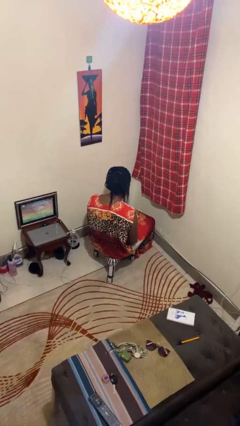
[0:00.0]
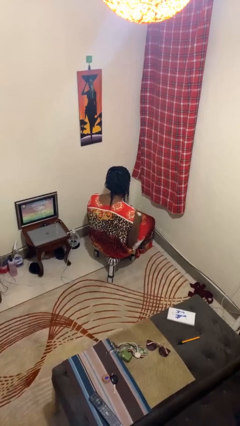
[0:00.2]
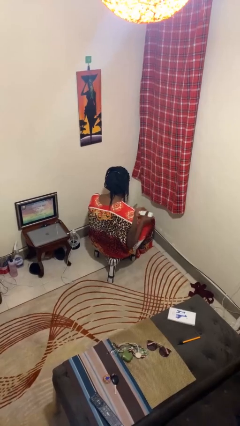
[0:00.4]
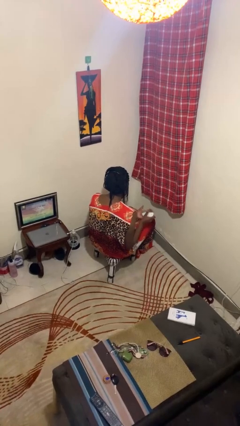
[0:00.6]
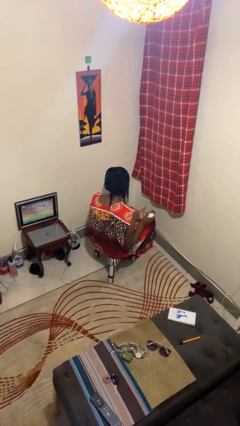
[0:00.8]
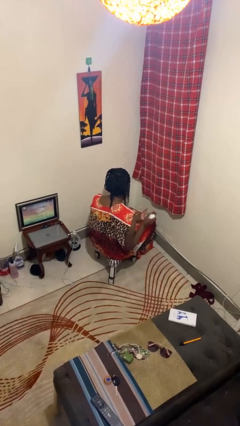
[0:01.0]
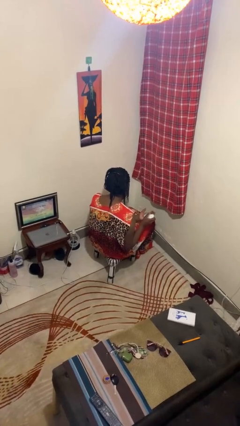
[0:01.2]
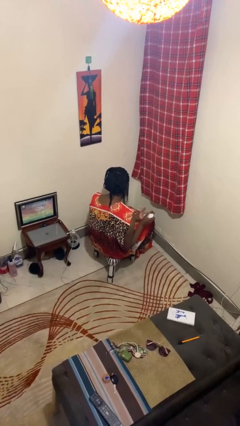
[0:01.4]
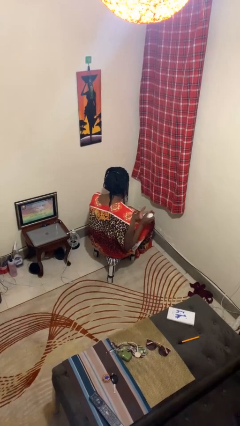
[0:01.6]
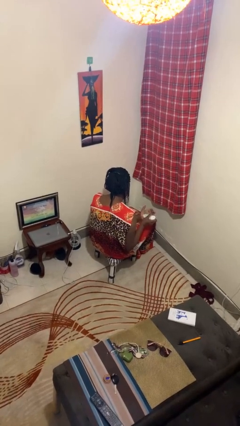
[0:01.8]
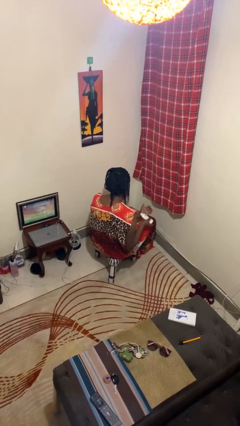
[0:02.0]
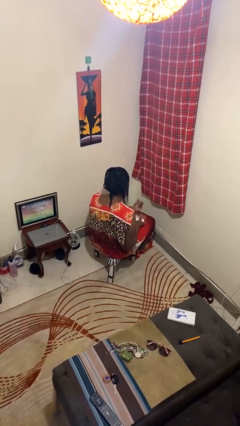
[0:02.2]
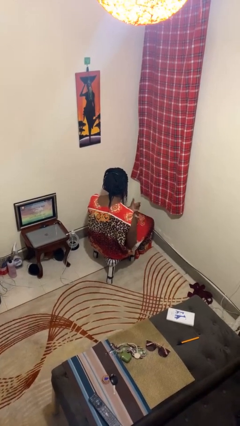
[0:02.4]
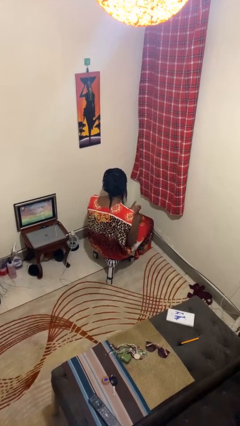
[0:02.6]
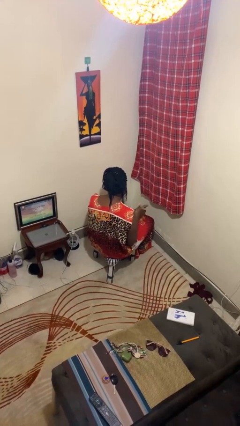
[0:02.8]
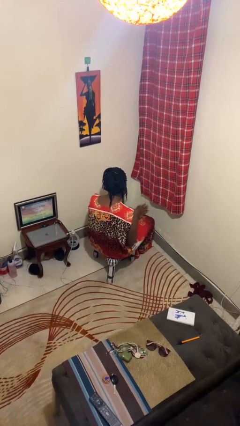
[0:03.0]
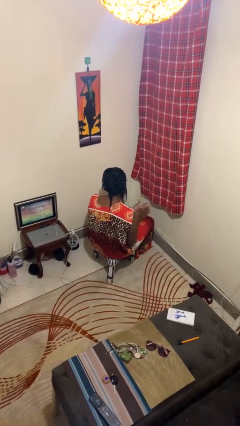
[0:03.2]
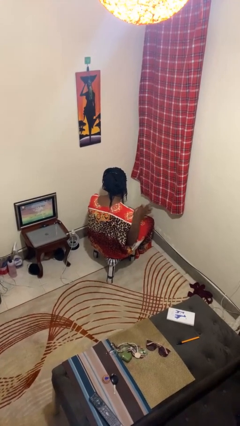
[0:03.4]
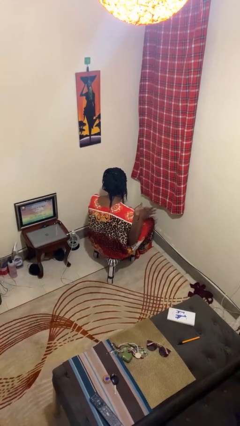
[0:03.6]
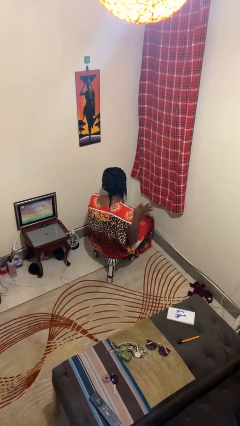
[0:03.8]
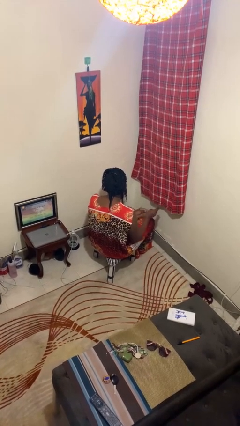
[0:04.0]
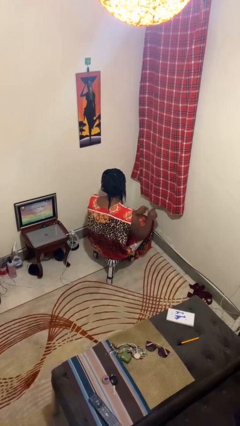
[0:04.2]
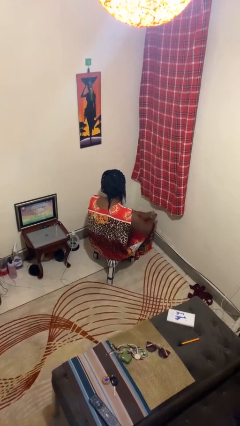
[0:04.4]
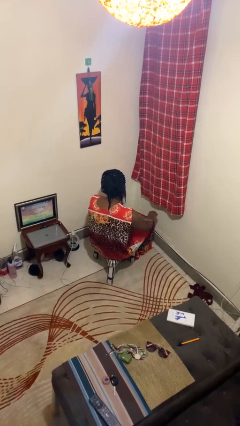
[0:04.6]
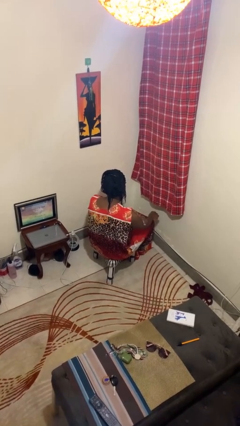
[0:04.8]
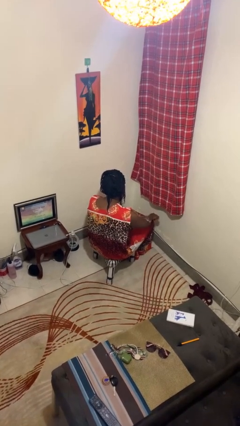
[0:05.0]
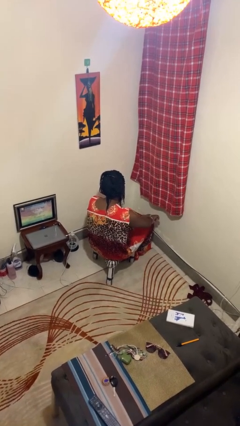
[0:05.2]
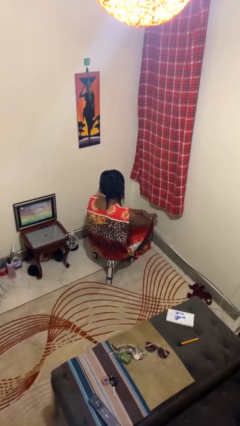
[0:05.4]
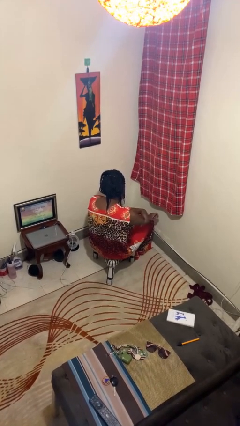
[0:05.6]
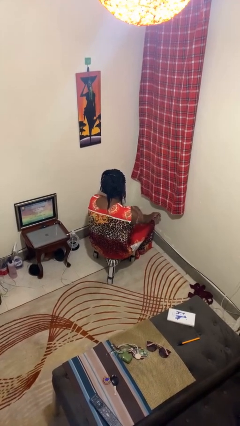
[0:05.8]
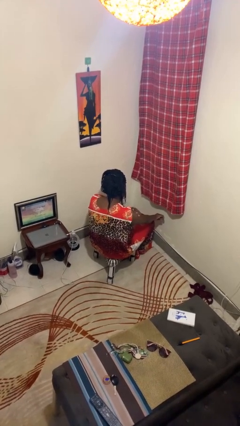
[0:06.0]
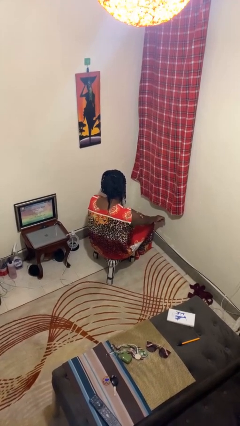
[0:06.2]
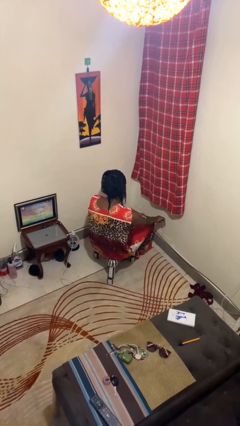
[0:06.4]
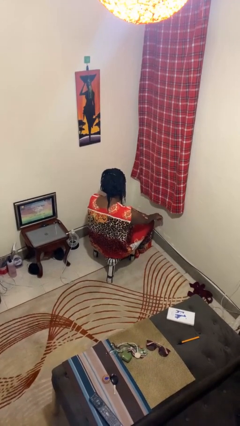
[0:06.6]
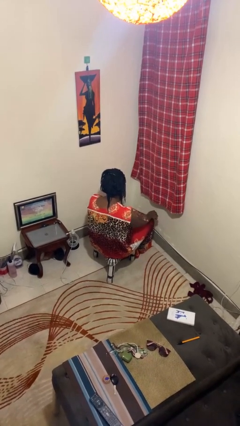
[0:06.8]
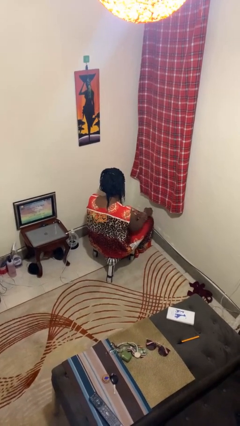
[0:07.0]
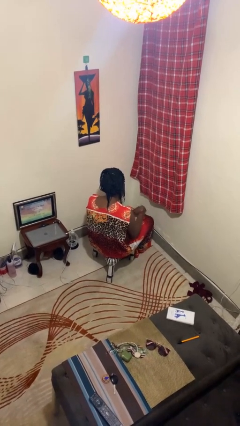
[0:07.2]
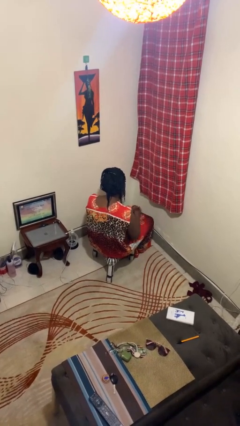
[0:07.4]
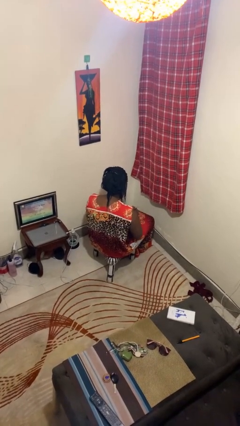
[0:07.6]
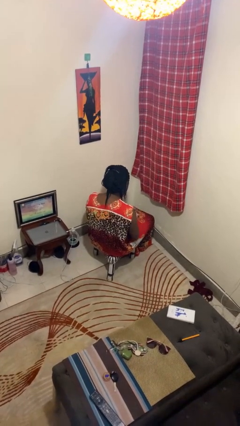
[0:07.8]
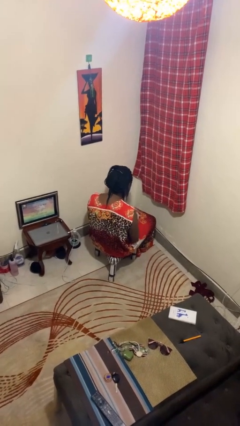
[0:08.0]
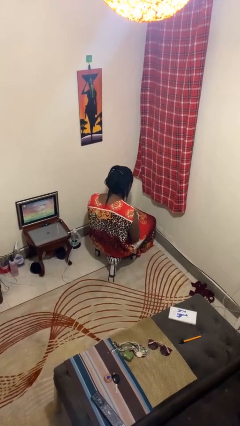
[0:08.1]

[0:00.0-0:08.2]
person applies sunscreen

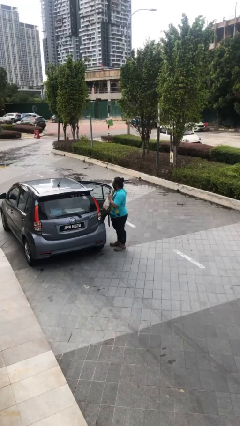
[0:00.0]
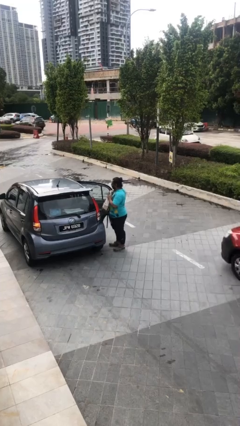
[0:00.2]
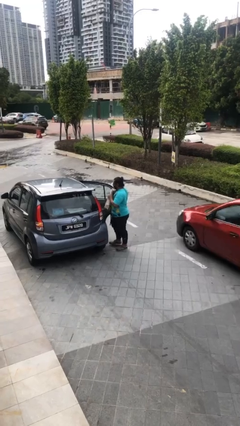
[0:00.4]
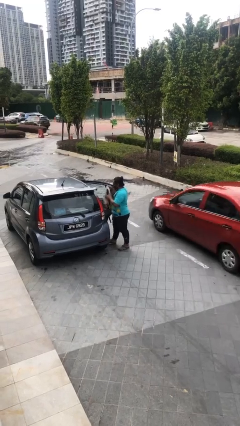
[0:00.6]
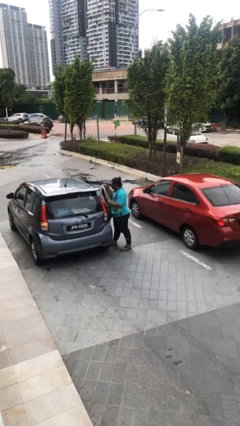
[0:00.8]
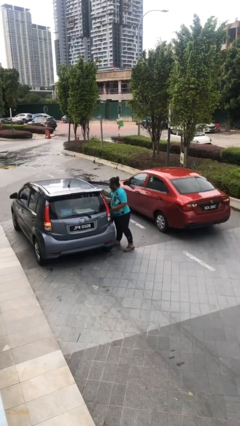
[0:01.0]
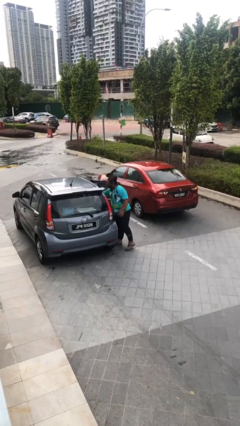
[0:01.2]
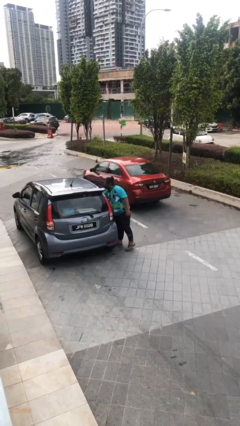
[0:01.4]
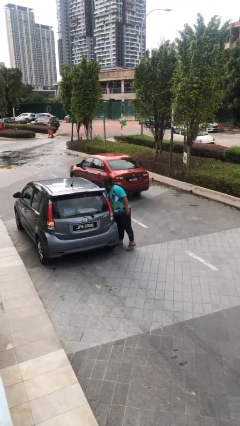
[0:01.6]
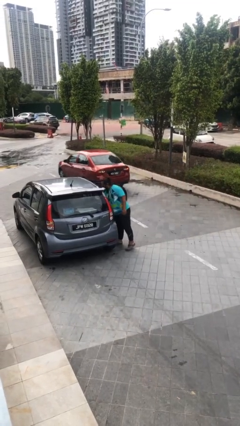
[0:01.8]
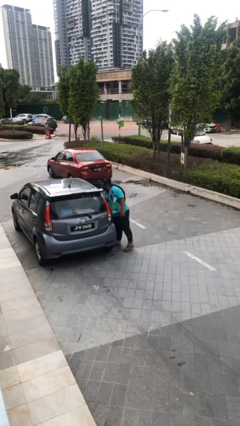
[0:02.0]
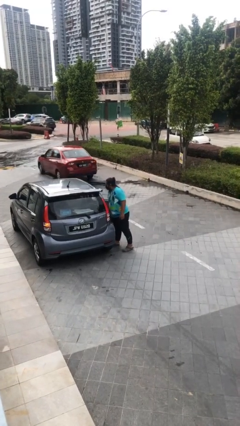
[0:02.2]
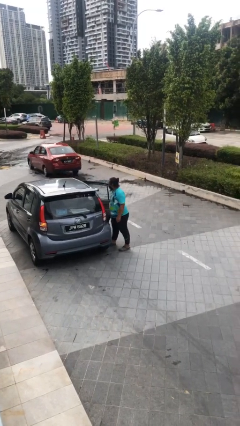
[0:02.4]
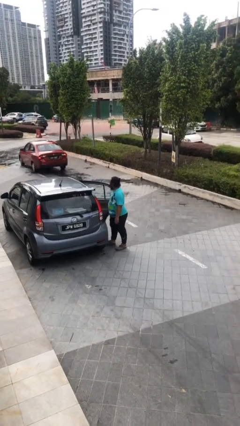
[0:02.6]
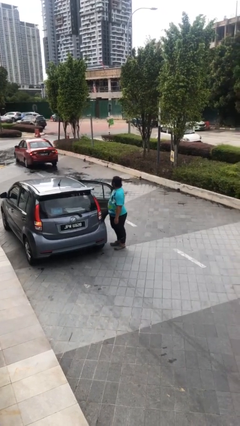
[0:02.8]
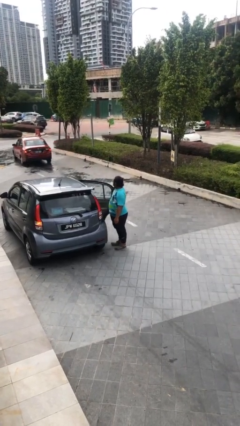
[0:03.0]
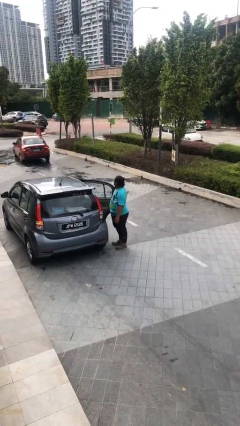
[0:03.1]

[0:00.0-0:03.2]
person loads car

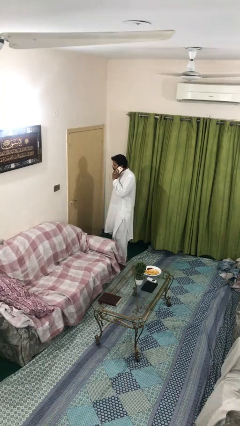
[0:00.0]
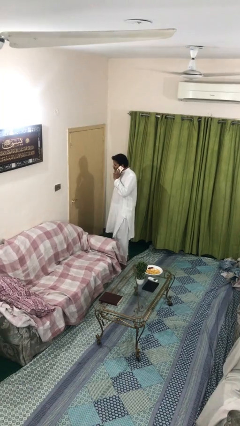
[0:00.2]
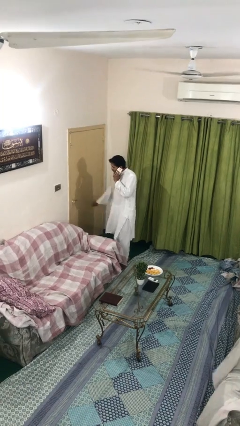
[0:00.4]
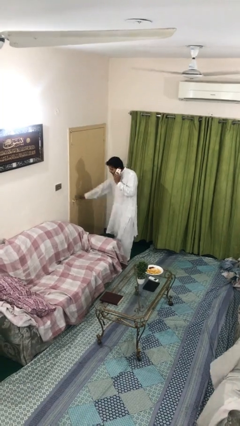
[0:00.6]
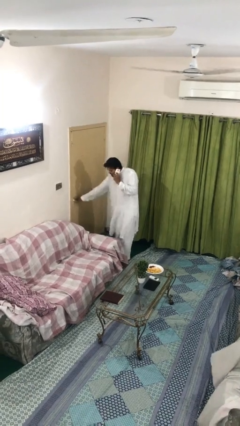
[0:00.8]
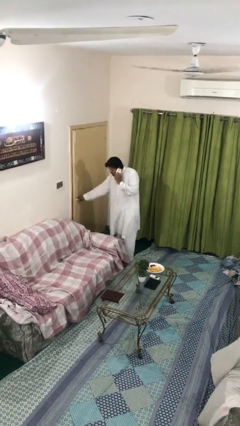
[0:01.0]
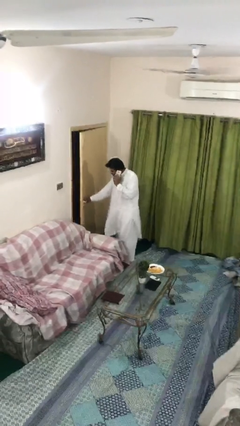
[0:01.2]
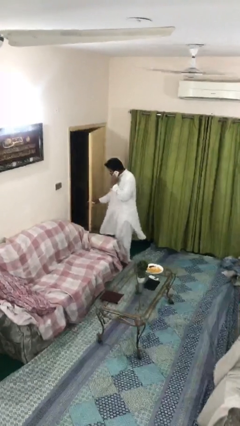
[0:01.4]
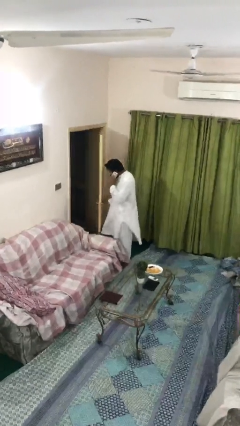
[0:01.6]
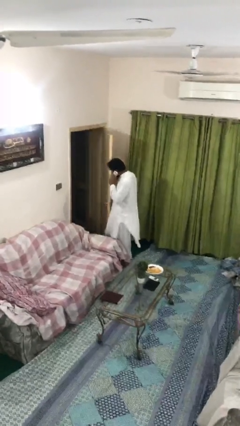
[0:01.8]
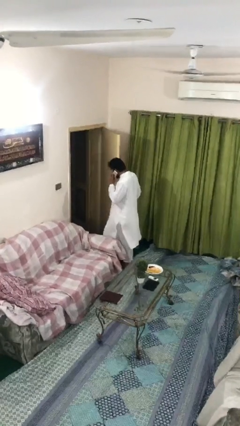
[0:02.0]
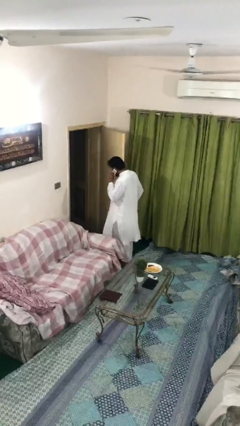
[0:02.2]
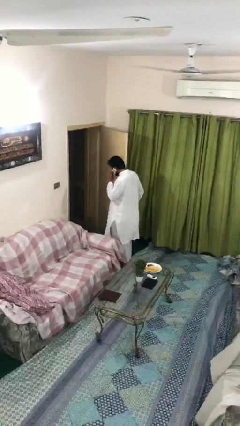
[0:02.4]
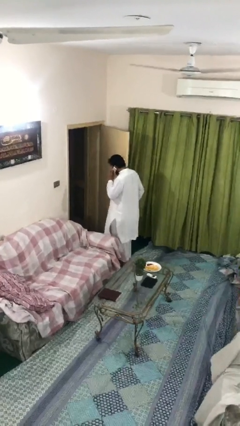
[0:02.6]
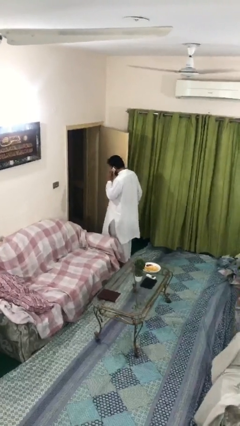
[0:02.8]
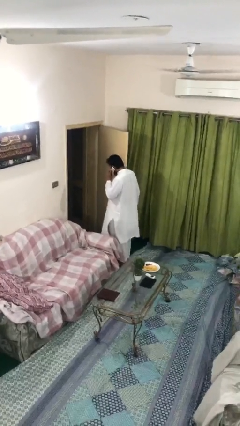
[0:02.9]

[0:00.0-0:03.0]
person opens facility door

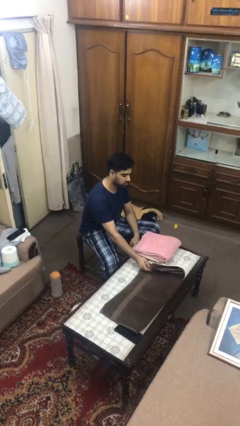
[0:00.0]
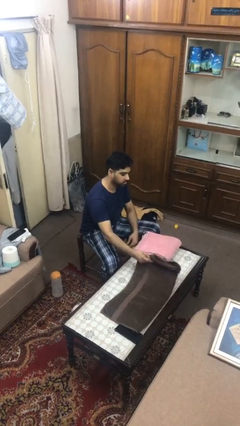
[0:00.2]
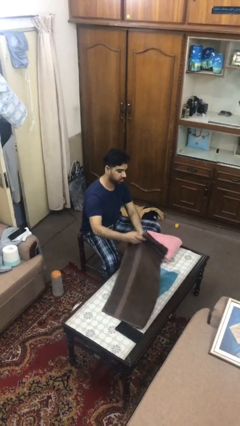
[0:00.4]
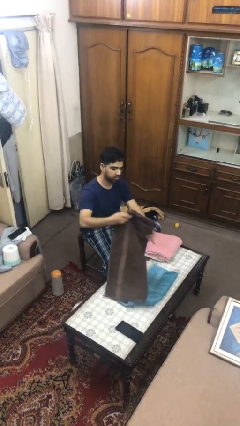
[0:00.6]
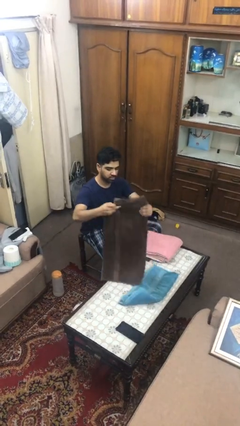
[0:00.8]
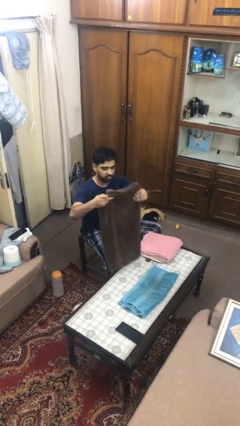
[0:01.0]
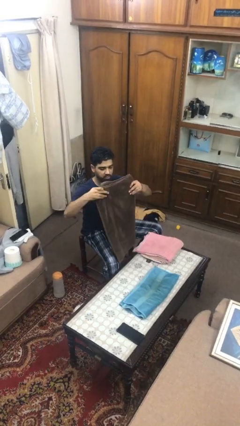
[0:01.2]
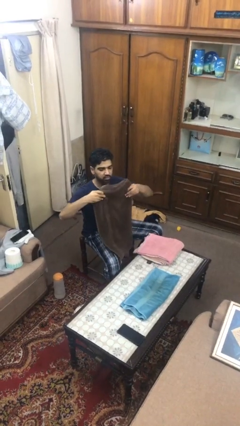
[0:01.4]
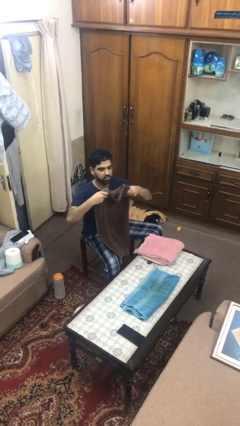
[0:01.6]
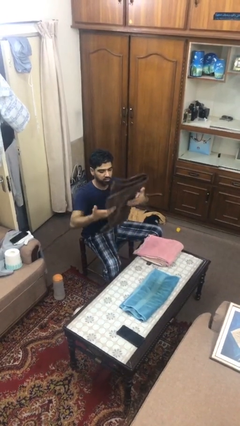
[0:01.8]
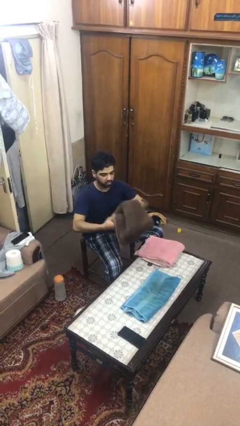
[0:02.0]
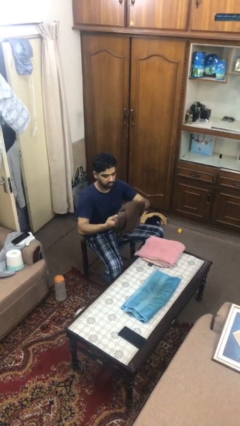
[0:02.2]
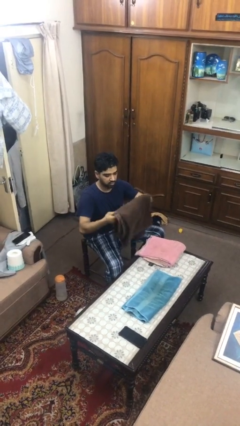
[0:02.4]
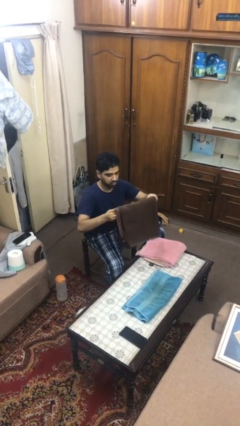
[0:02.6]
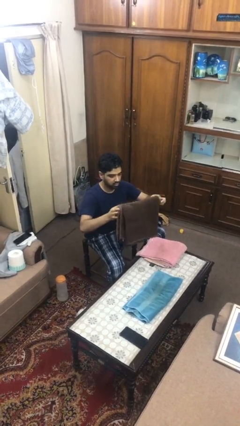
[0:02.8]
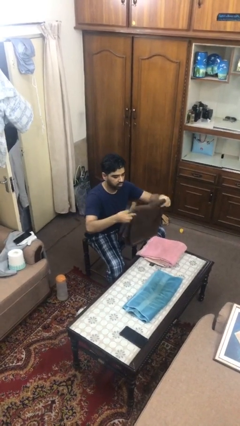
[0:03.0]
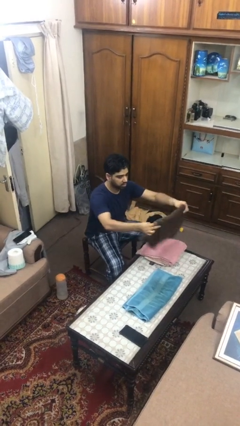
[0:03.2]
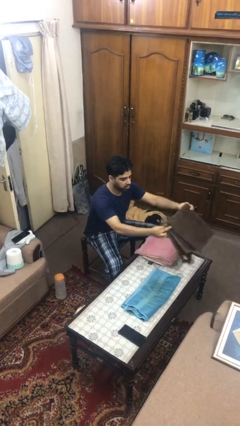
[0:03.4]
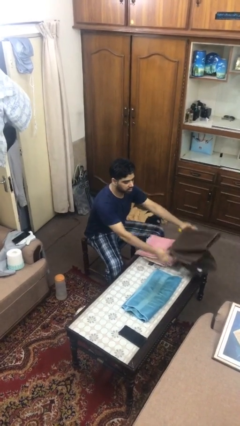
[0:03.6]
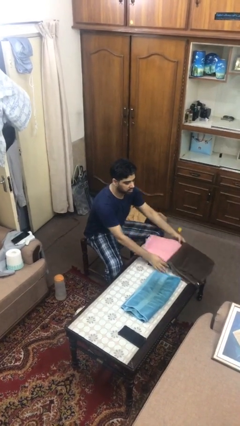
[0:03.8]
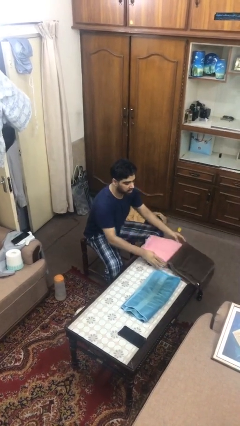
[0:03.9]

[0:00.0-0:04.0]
person folds towel
